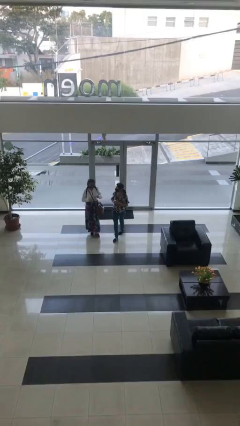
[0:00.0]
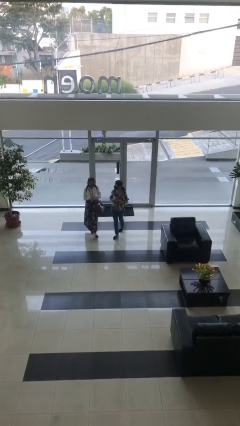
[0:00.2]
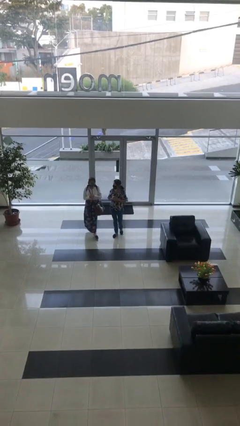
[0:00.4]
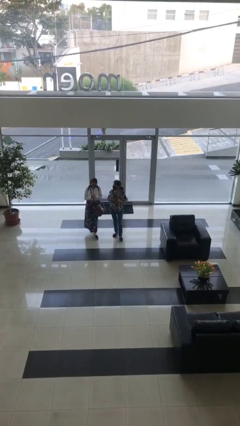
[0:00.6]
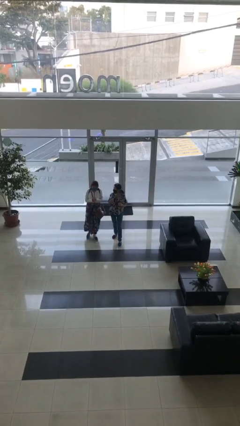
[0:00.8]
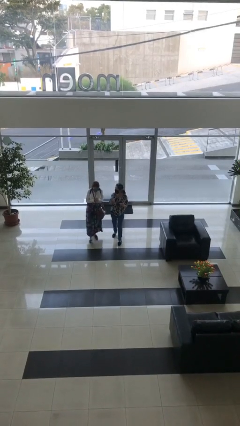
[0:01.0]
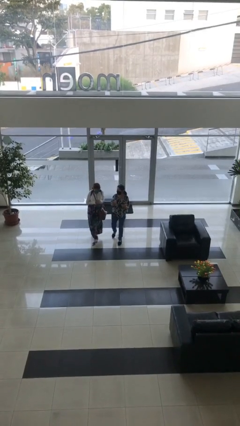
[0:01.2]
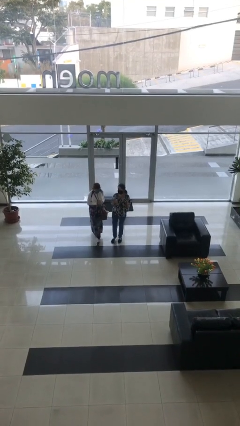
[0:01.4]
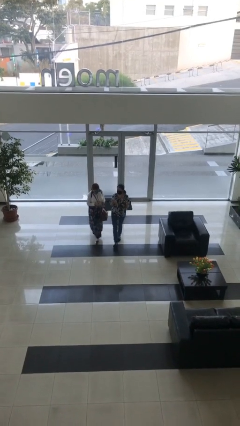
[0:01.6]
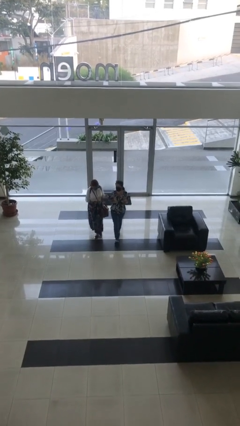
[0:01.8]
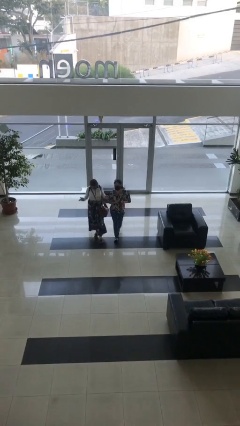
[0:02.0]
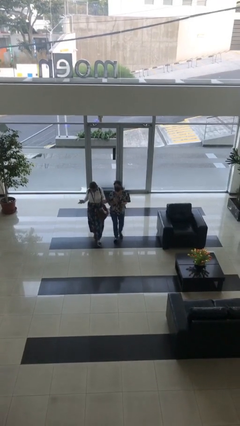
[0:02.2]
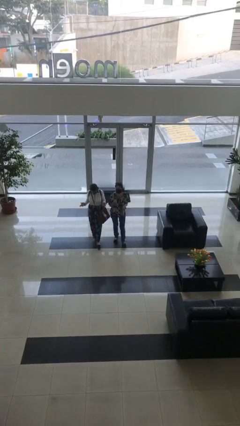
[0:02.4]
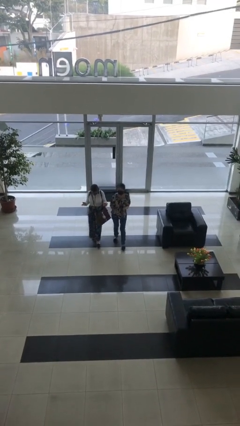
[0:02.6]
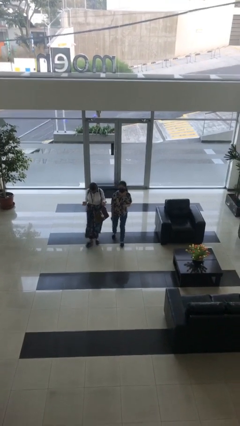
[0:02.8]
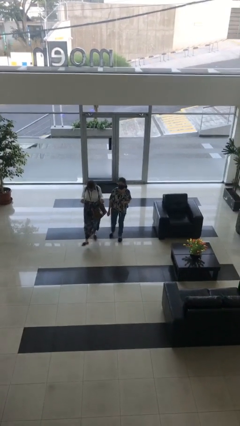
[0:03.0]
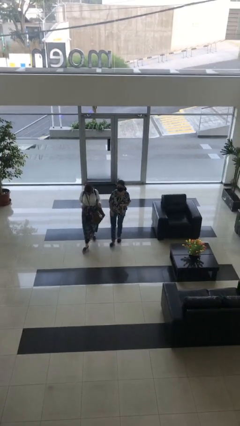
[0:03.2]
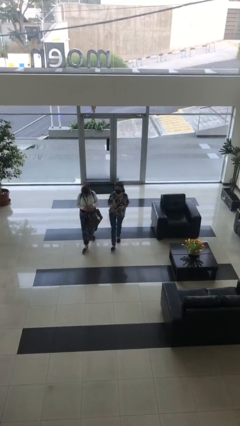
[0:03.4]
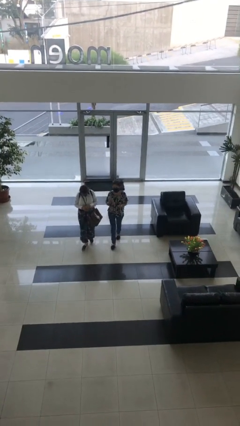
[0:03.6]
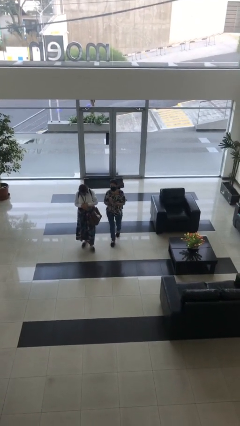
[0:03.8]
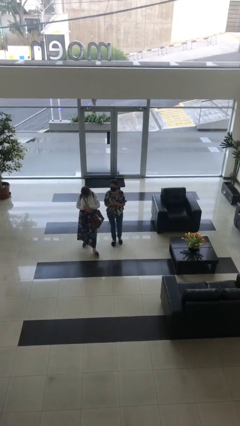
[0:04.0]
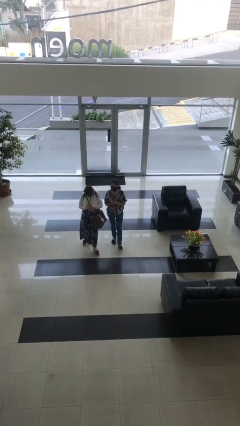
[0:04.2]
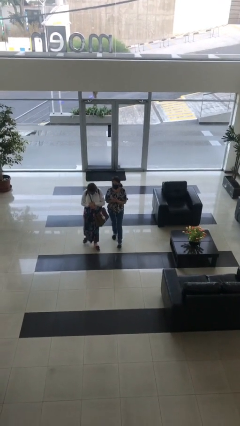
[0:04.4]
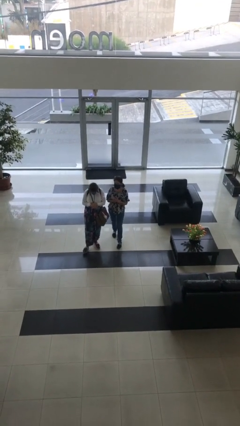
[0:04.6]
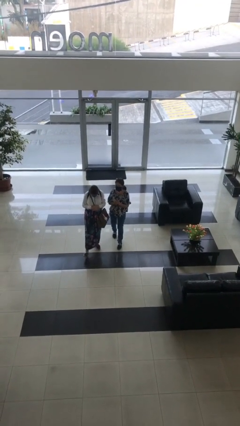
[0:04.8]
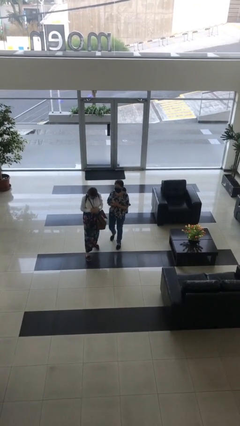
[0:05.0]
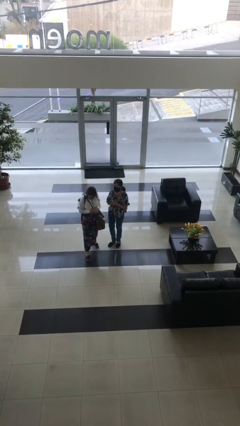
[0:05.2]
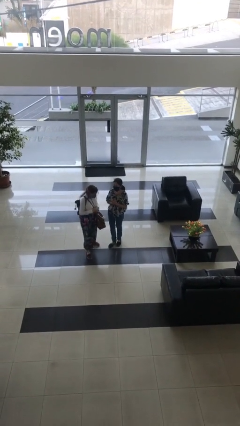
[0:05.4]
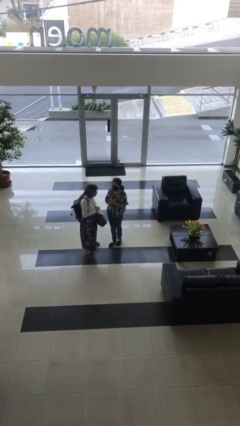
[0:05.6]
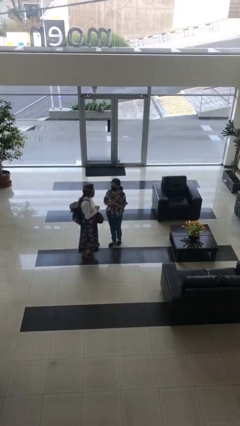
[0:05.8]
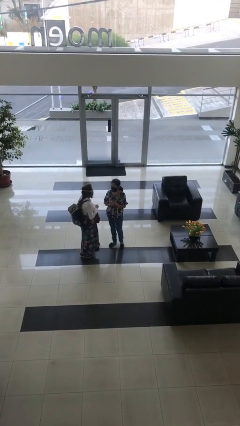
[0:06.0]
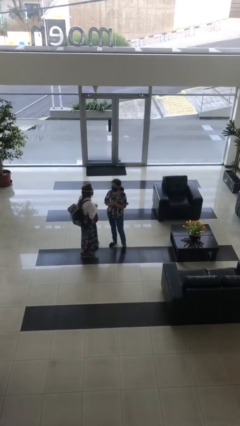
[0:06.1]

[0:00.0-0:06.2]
person talks to person

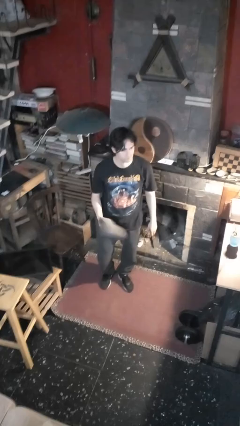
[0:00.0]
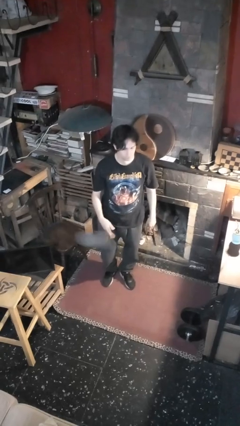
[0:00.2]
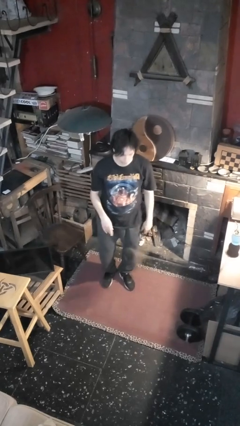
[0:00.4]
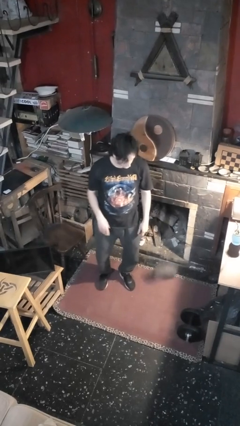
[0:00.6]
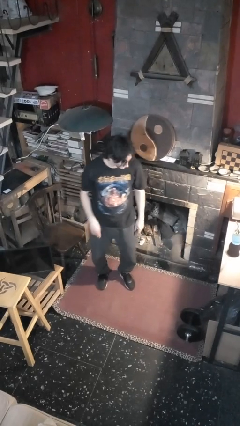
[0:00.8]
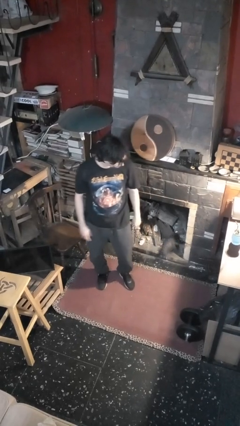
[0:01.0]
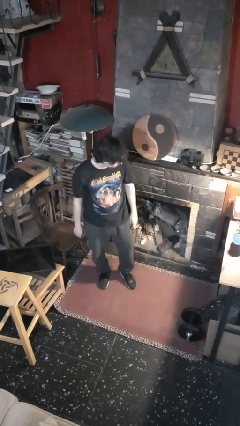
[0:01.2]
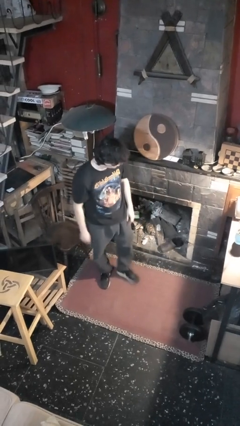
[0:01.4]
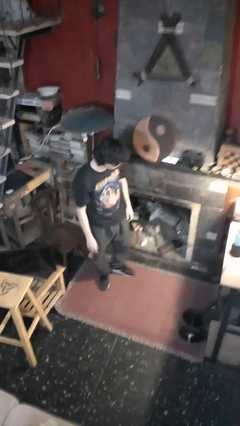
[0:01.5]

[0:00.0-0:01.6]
person drops object

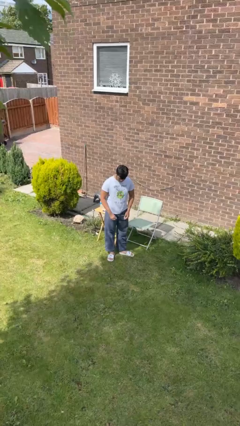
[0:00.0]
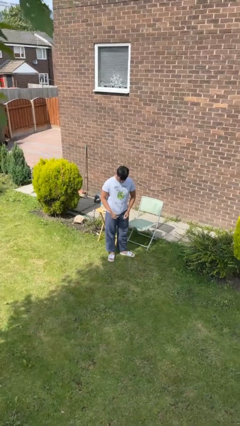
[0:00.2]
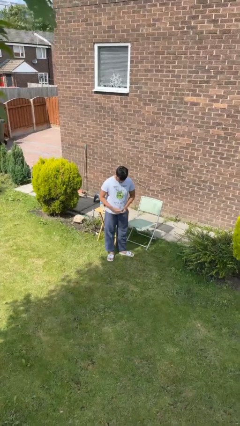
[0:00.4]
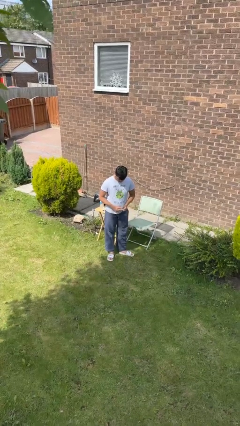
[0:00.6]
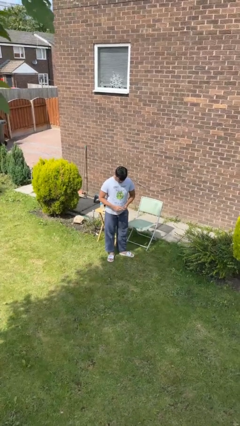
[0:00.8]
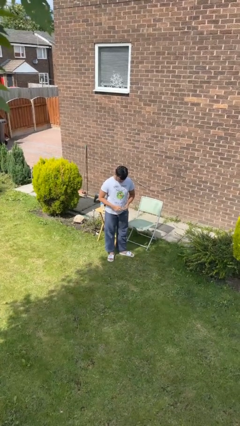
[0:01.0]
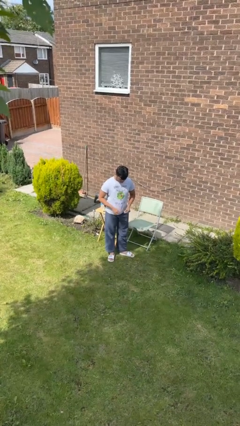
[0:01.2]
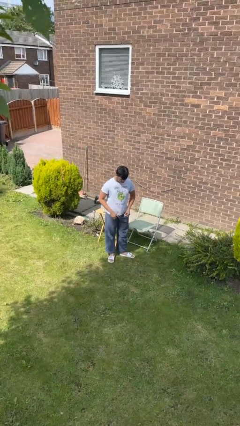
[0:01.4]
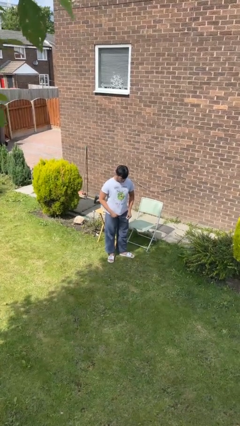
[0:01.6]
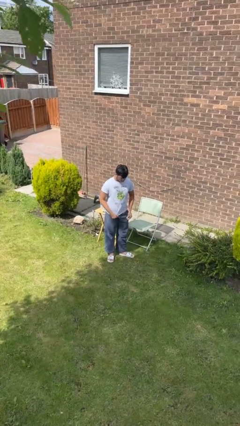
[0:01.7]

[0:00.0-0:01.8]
person takes off ring

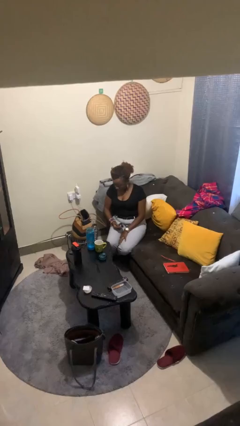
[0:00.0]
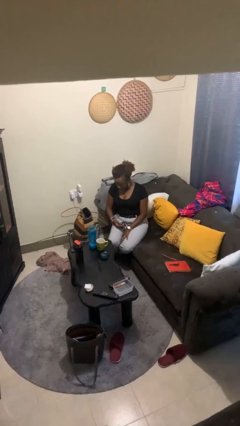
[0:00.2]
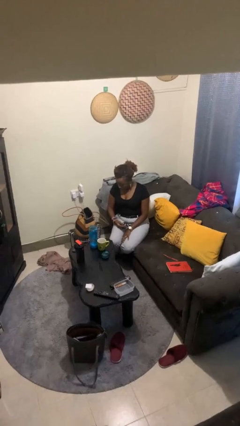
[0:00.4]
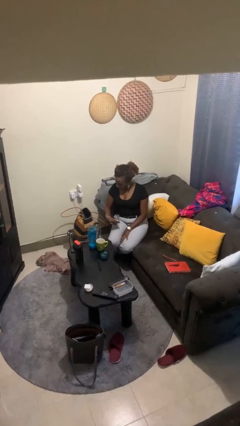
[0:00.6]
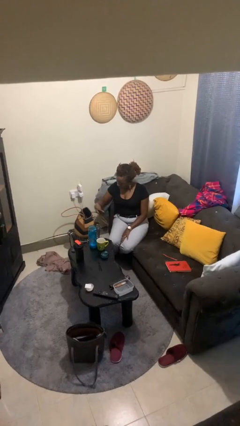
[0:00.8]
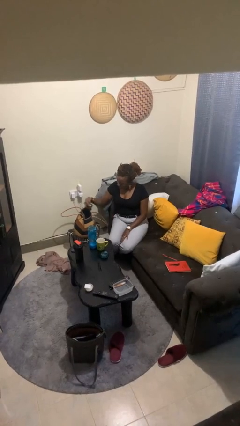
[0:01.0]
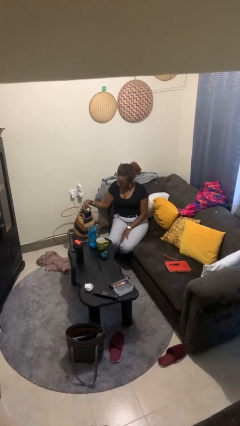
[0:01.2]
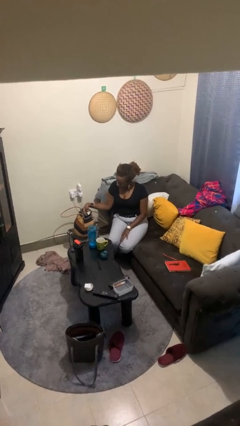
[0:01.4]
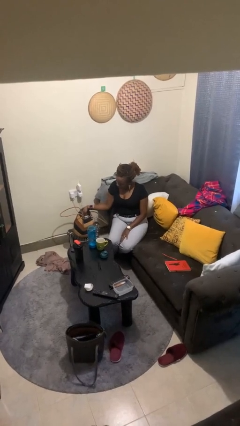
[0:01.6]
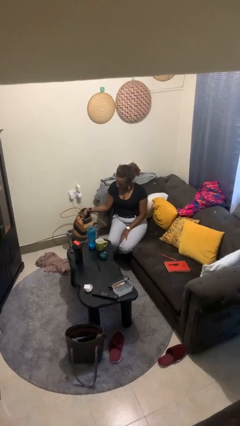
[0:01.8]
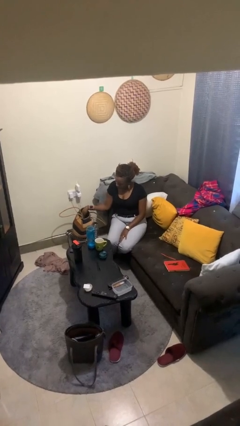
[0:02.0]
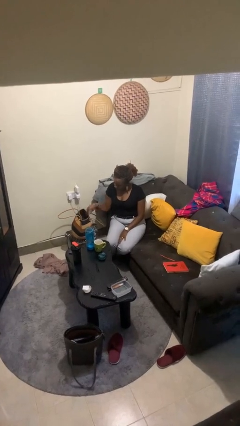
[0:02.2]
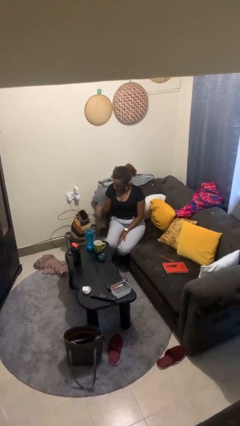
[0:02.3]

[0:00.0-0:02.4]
person puts object into purse

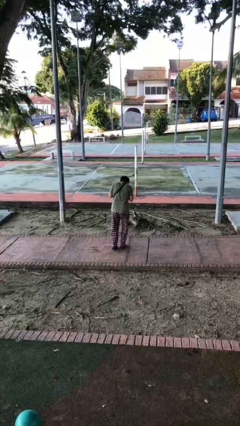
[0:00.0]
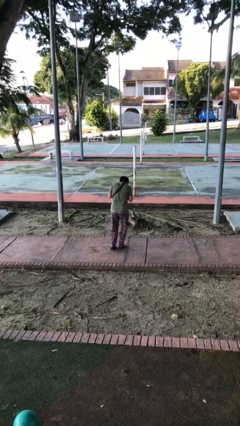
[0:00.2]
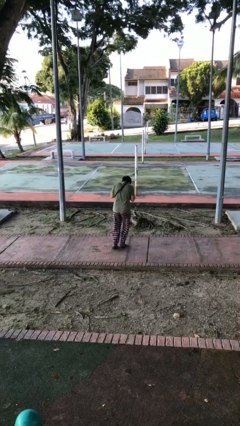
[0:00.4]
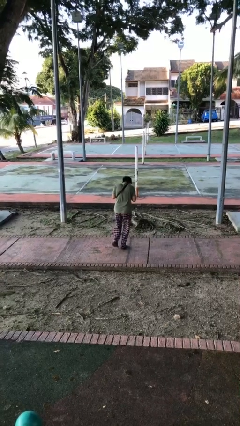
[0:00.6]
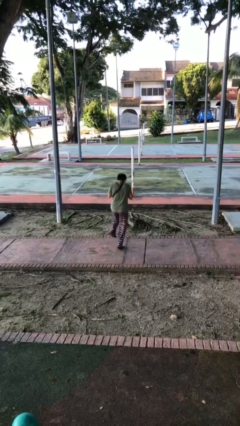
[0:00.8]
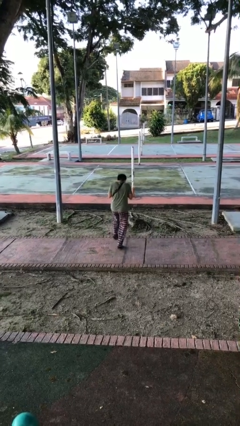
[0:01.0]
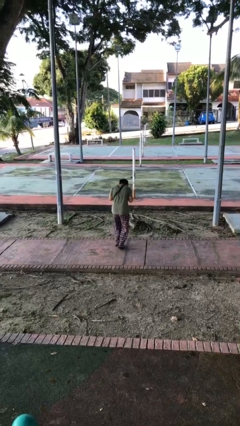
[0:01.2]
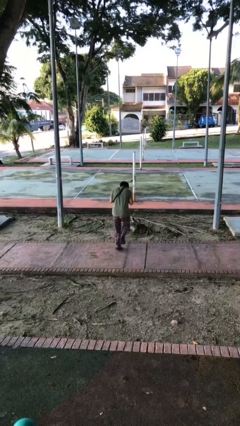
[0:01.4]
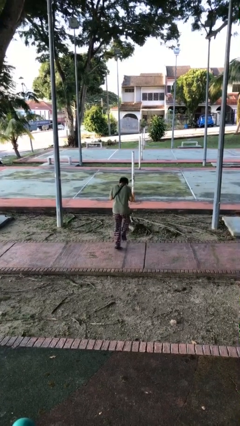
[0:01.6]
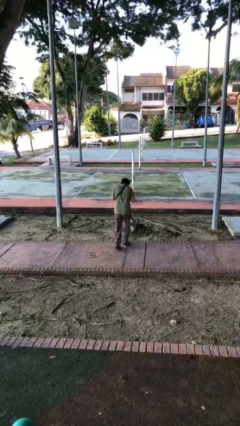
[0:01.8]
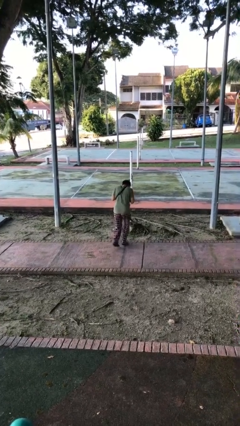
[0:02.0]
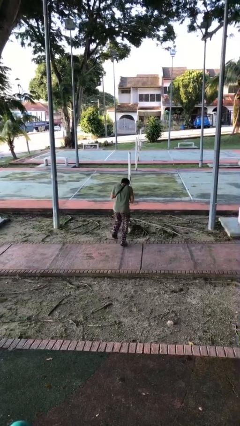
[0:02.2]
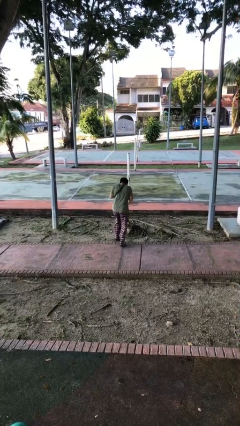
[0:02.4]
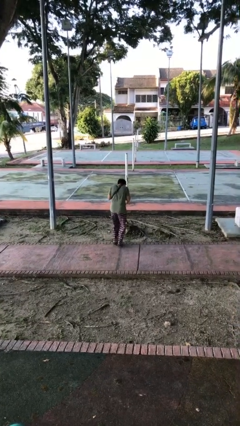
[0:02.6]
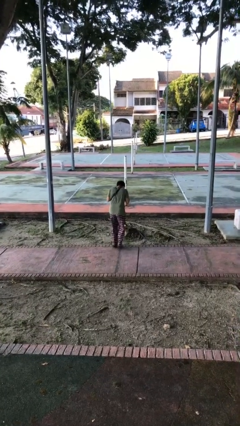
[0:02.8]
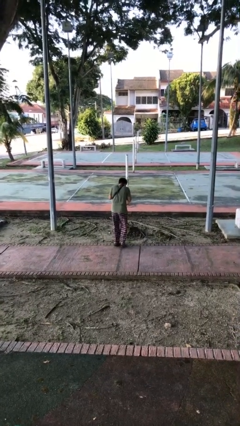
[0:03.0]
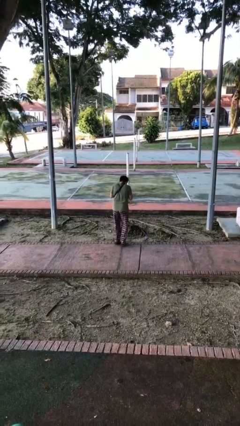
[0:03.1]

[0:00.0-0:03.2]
person walks tiptoe

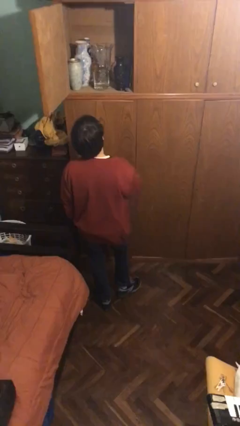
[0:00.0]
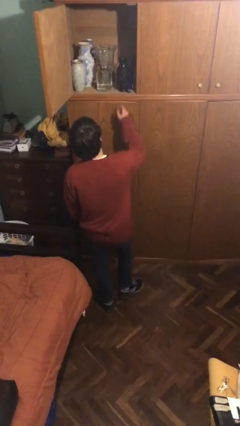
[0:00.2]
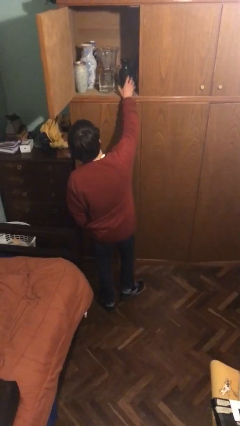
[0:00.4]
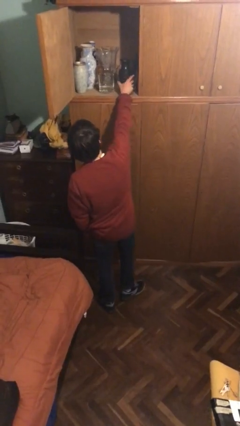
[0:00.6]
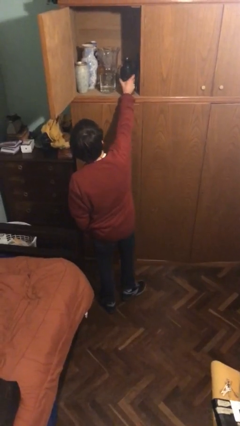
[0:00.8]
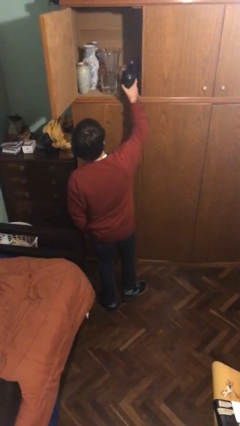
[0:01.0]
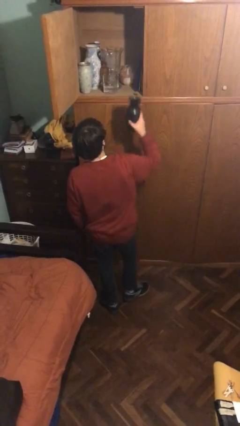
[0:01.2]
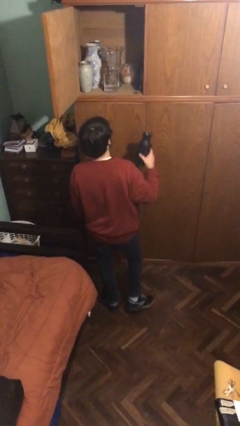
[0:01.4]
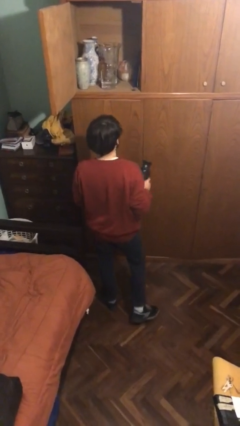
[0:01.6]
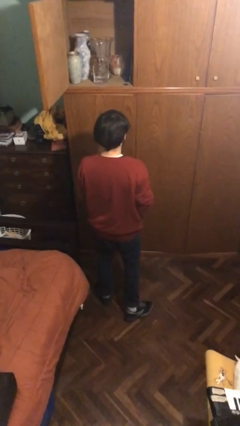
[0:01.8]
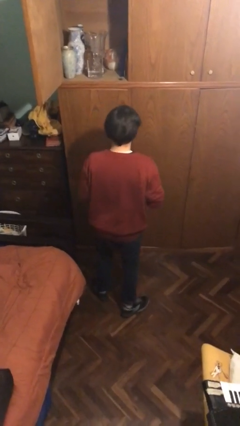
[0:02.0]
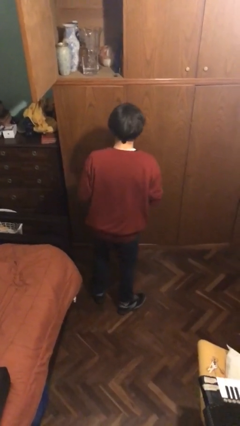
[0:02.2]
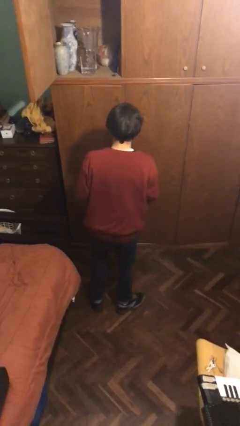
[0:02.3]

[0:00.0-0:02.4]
person picks up object from cabinet
